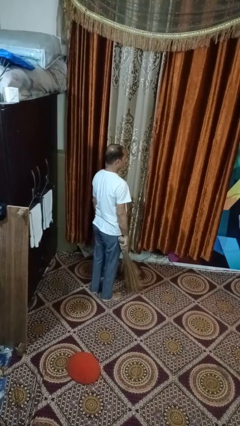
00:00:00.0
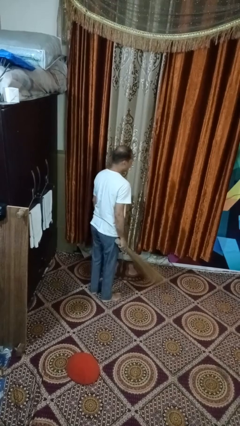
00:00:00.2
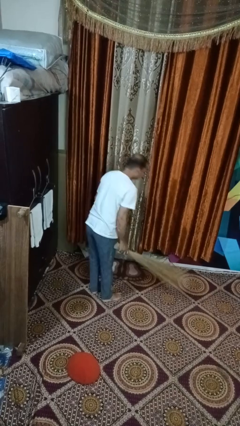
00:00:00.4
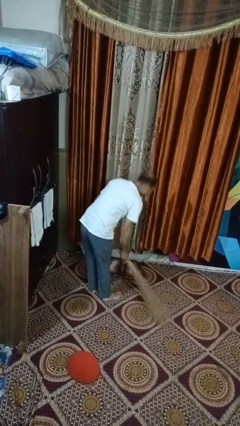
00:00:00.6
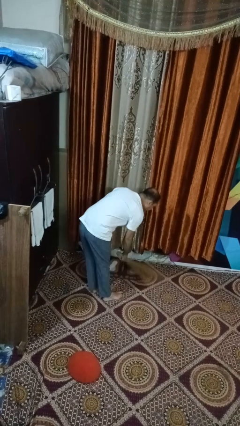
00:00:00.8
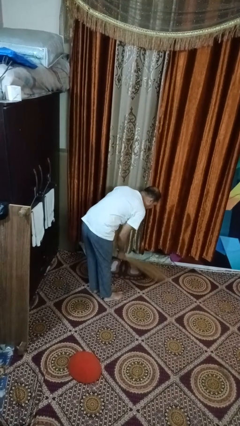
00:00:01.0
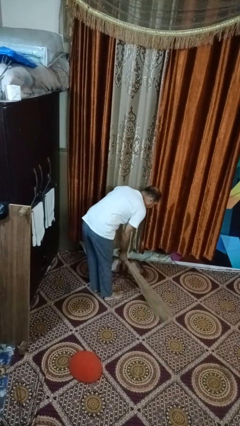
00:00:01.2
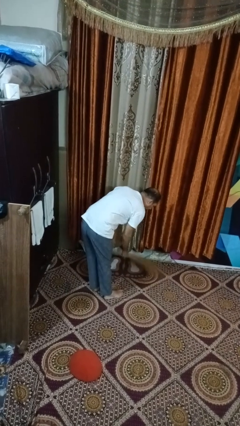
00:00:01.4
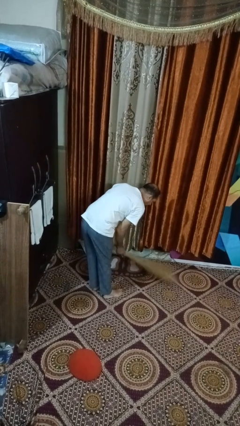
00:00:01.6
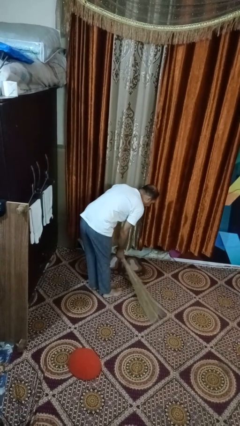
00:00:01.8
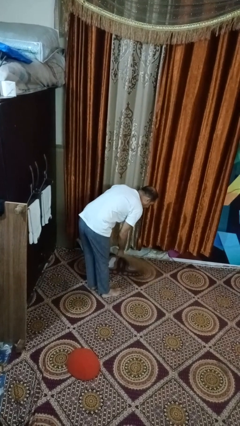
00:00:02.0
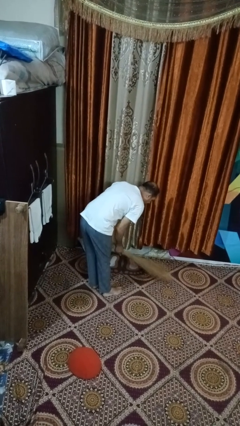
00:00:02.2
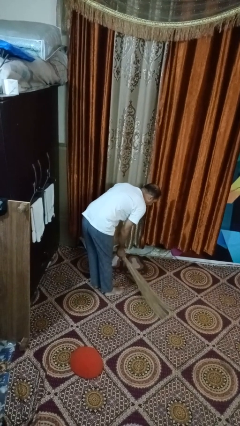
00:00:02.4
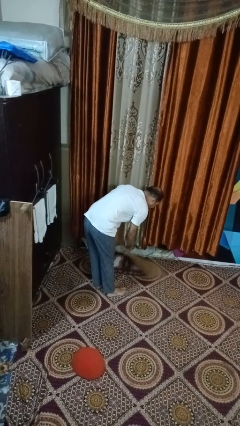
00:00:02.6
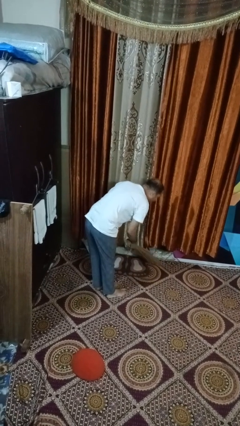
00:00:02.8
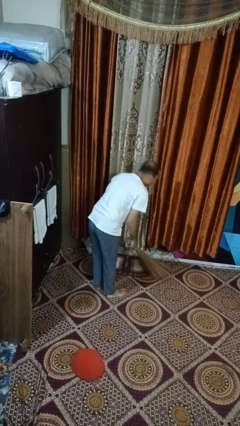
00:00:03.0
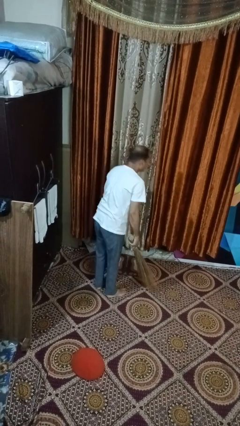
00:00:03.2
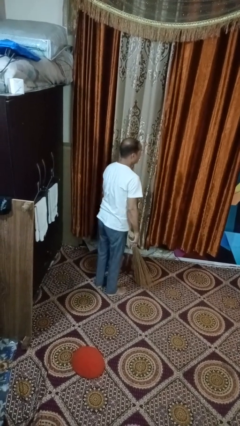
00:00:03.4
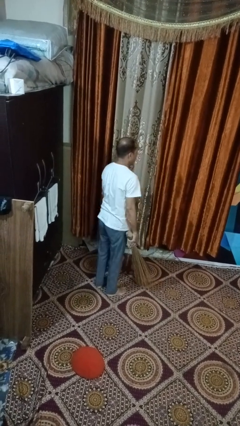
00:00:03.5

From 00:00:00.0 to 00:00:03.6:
person sweeps floor

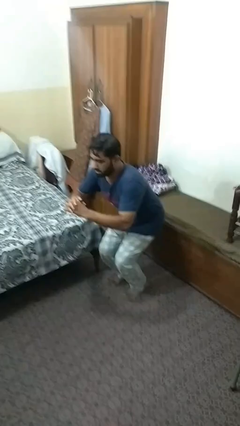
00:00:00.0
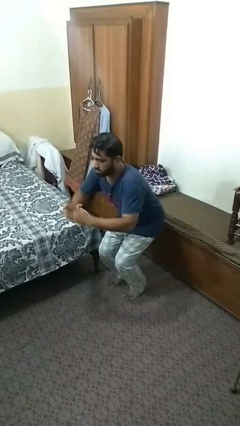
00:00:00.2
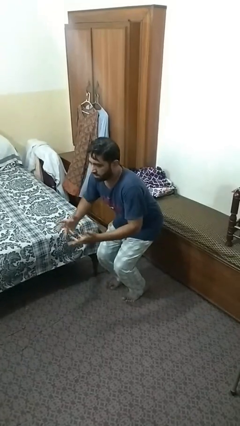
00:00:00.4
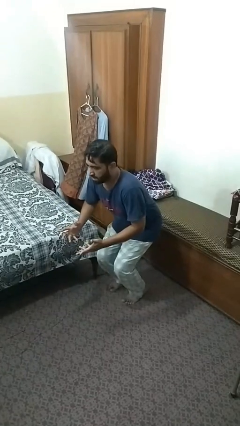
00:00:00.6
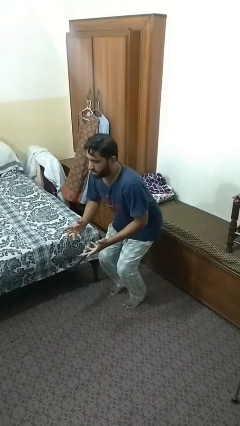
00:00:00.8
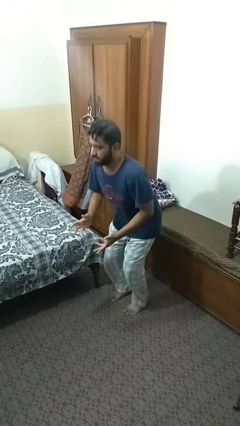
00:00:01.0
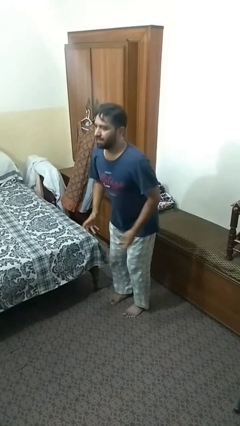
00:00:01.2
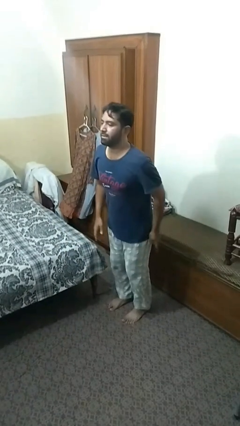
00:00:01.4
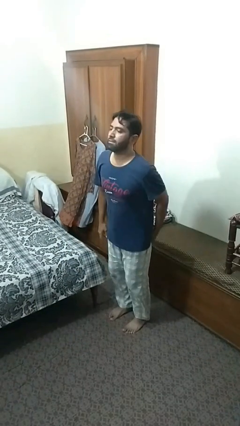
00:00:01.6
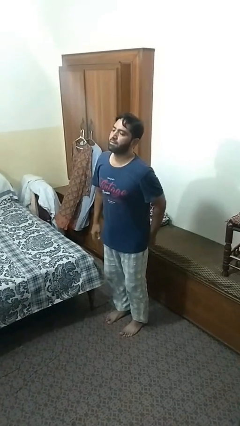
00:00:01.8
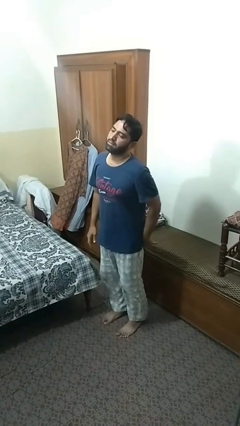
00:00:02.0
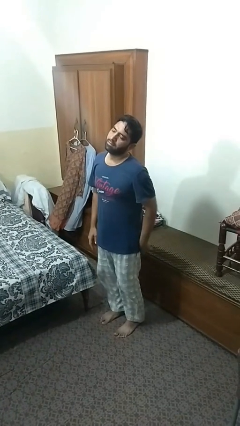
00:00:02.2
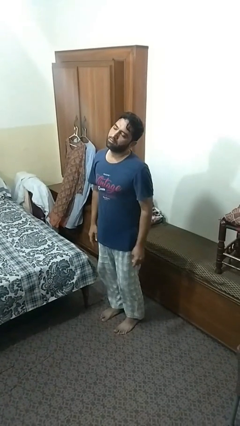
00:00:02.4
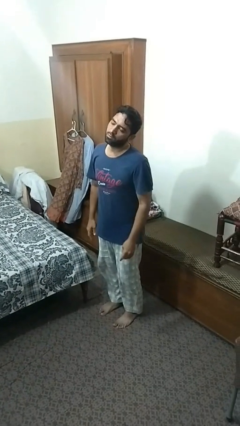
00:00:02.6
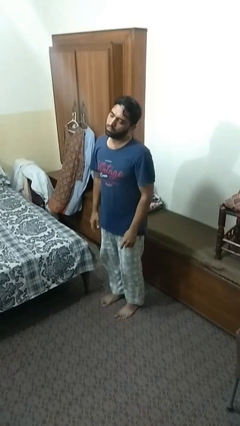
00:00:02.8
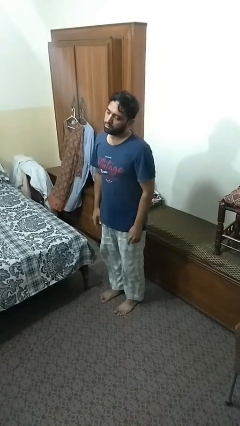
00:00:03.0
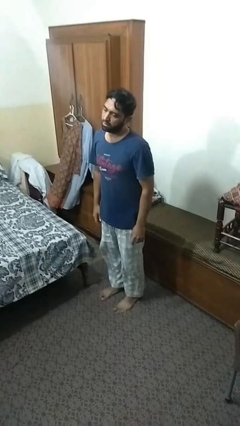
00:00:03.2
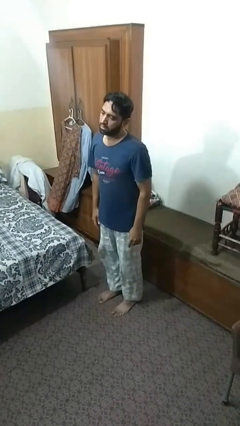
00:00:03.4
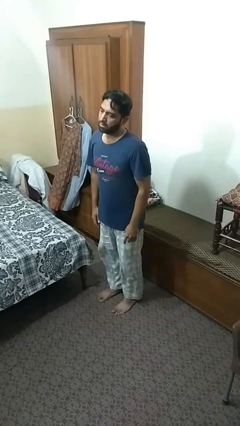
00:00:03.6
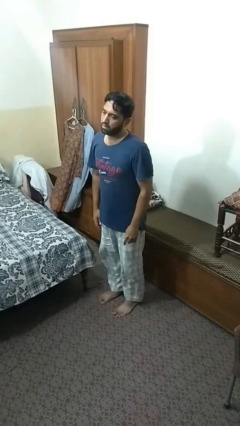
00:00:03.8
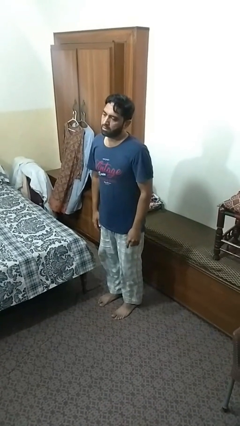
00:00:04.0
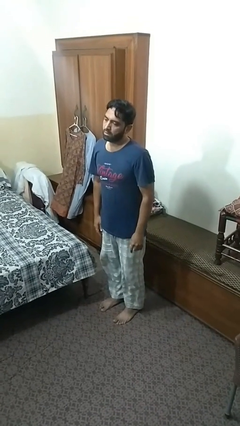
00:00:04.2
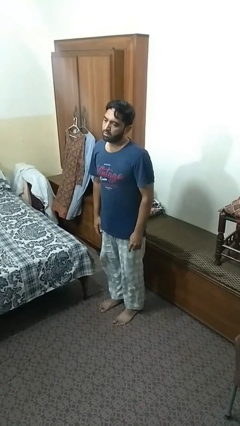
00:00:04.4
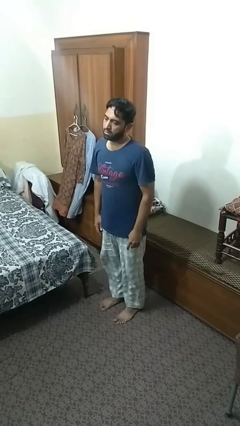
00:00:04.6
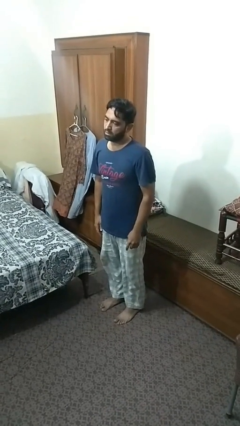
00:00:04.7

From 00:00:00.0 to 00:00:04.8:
person stands up

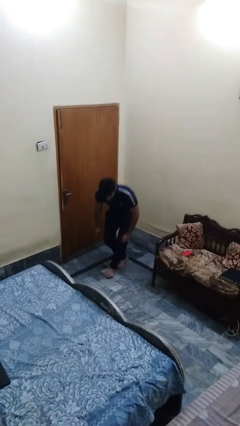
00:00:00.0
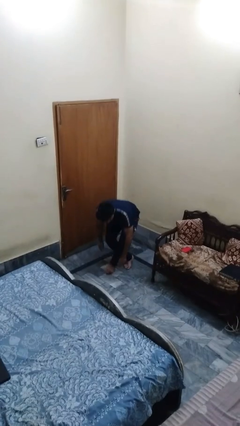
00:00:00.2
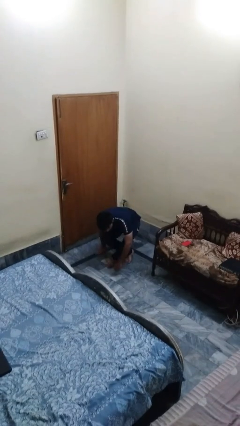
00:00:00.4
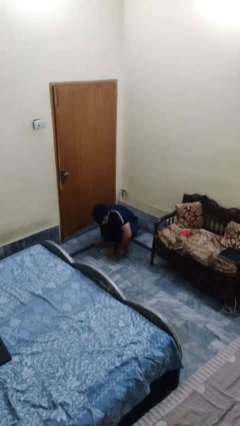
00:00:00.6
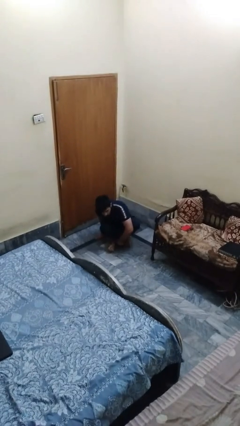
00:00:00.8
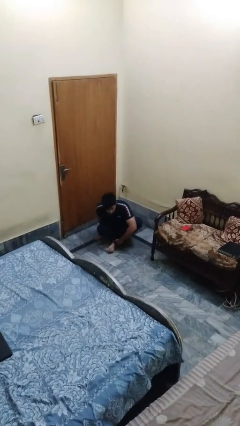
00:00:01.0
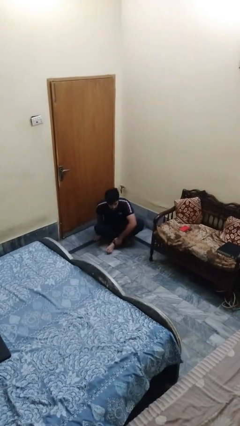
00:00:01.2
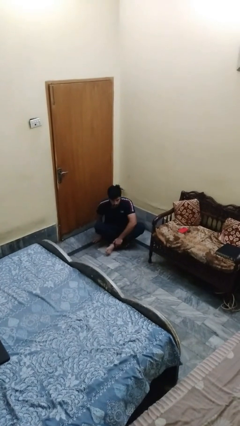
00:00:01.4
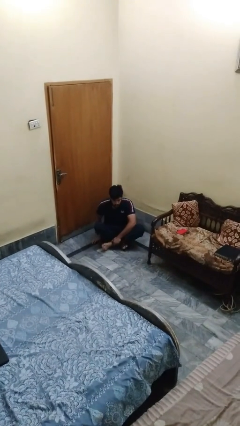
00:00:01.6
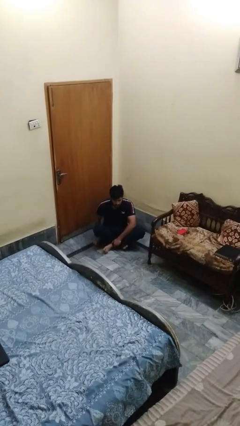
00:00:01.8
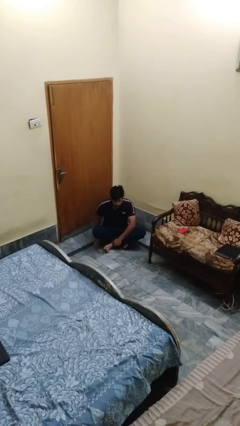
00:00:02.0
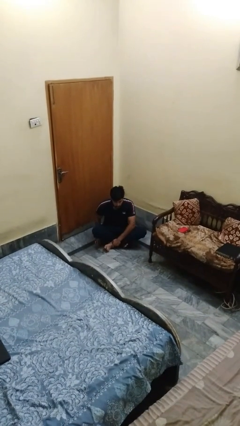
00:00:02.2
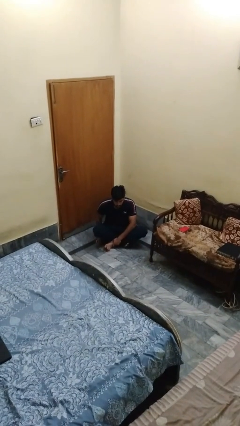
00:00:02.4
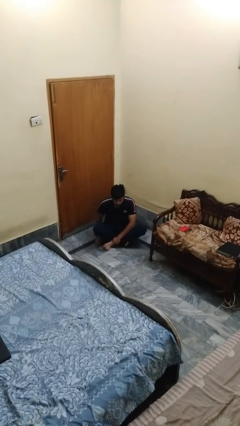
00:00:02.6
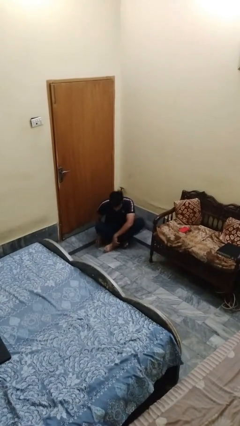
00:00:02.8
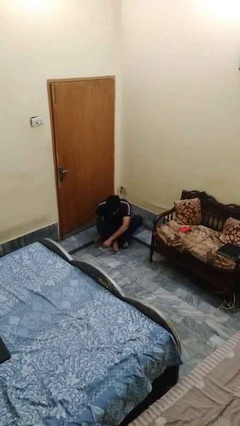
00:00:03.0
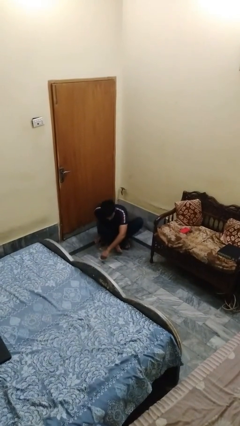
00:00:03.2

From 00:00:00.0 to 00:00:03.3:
person sits crisscross

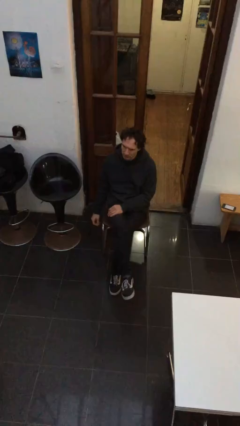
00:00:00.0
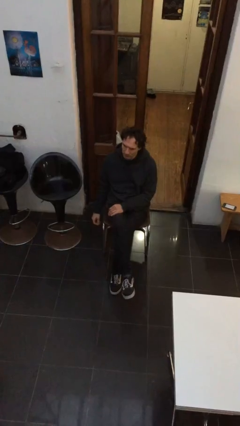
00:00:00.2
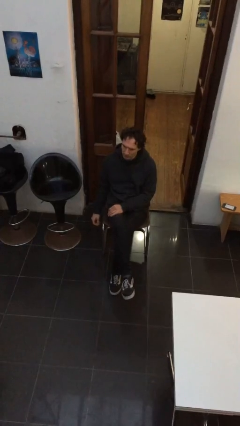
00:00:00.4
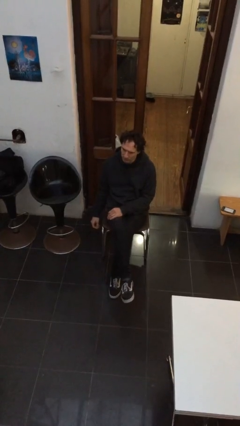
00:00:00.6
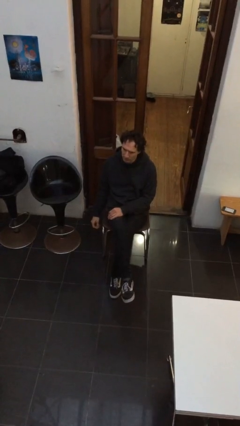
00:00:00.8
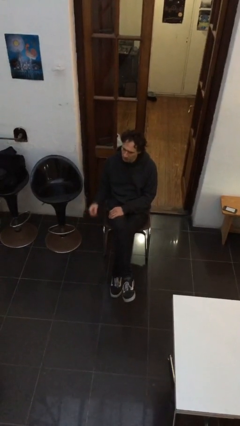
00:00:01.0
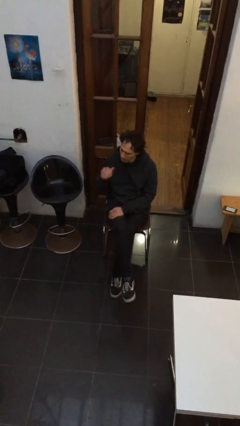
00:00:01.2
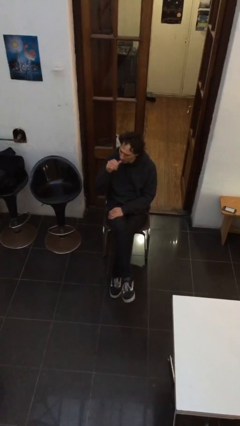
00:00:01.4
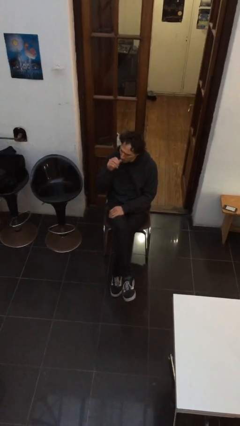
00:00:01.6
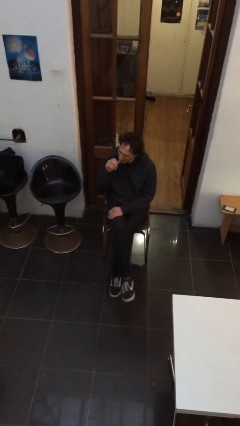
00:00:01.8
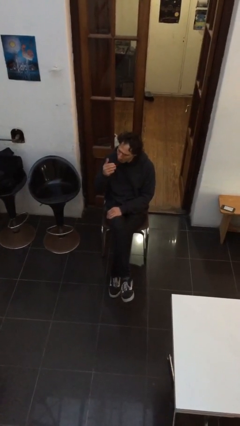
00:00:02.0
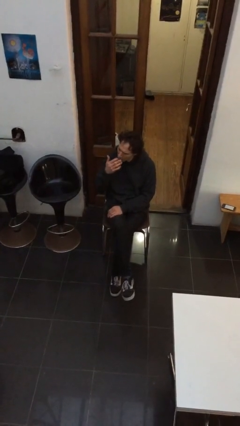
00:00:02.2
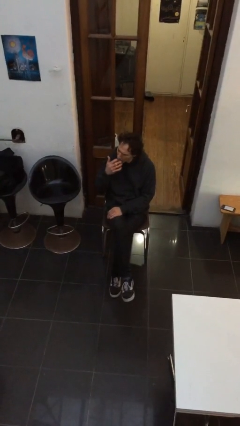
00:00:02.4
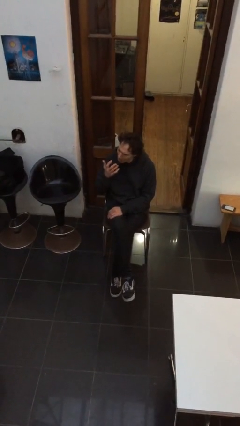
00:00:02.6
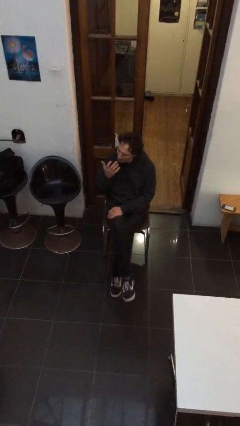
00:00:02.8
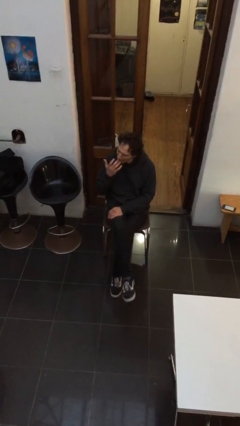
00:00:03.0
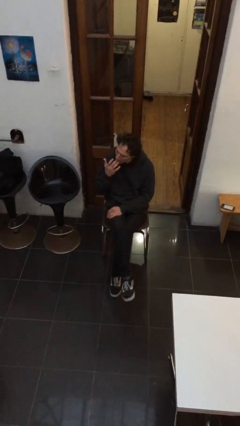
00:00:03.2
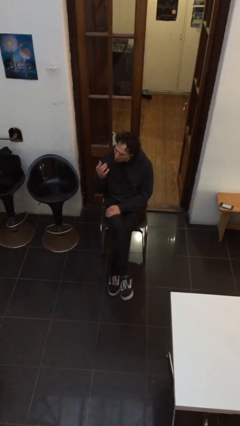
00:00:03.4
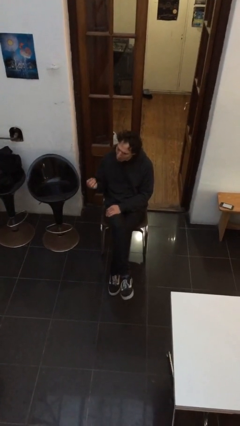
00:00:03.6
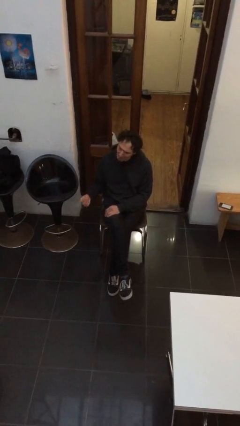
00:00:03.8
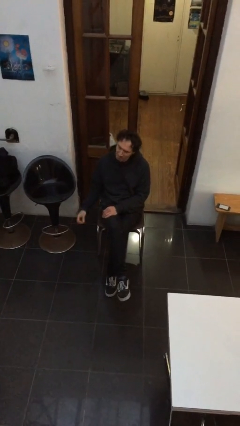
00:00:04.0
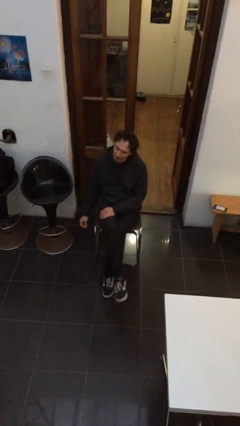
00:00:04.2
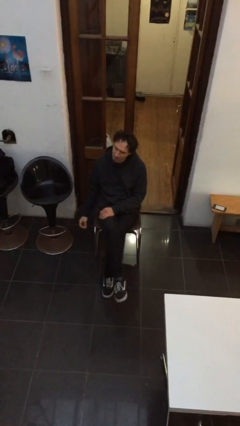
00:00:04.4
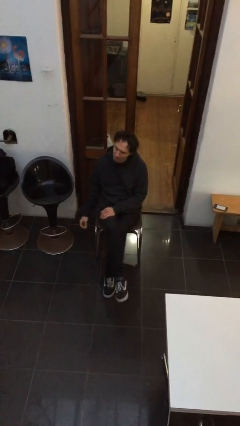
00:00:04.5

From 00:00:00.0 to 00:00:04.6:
person licks fingers

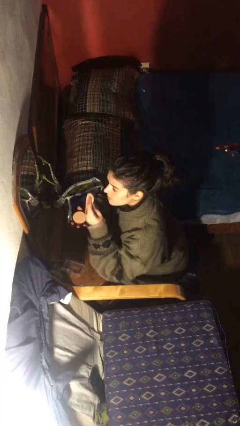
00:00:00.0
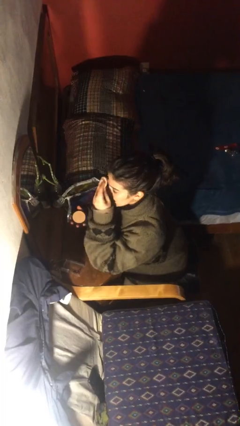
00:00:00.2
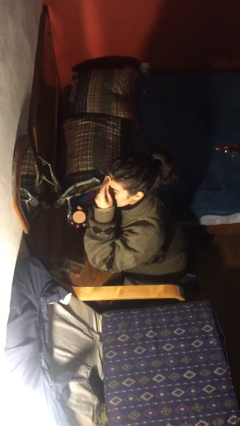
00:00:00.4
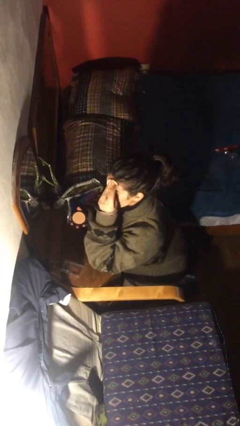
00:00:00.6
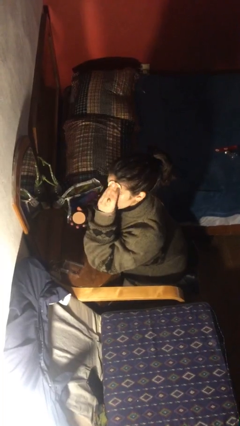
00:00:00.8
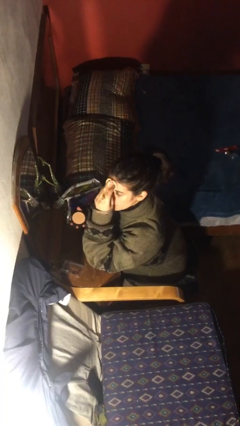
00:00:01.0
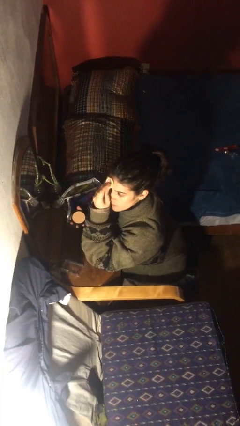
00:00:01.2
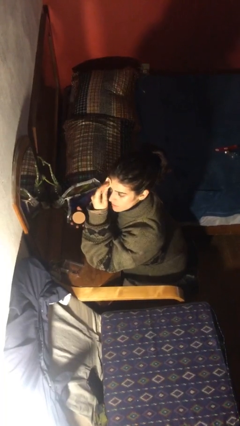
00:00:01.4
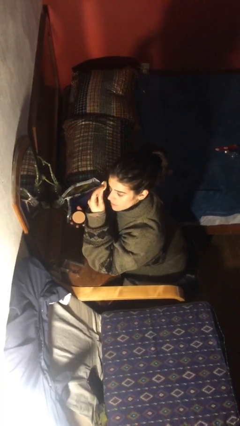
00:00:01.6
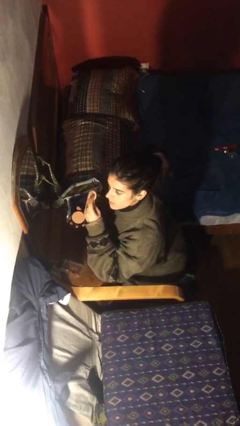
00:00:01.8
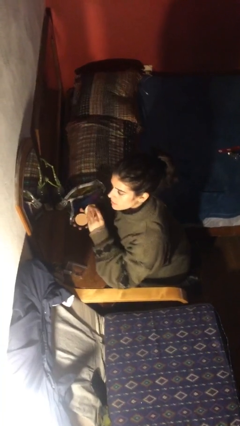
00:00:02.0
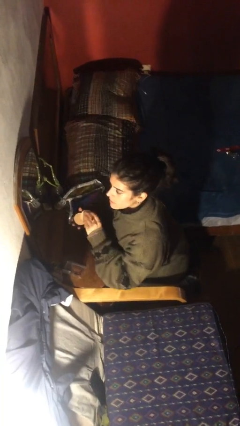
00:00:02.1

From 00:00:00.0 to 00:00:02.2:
person applies foundation makeup
